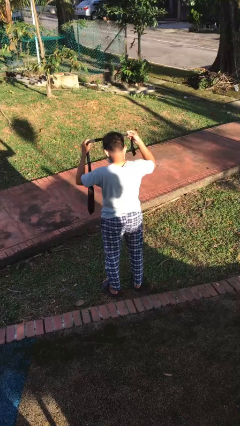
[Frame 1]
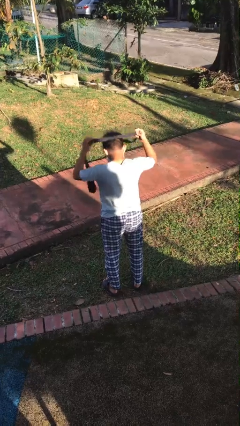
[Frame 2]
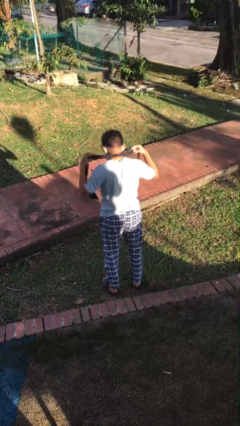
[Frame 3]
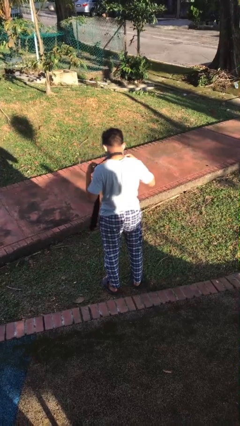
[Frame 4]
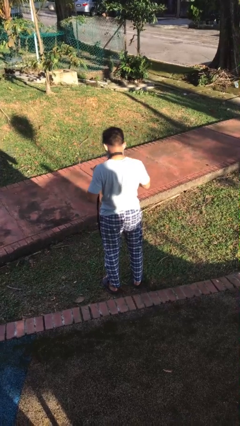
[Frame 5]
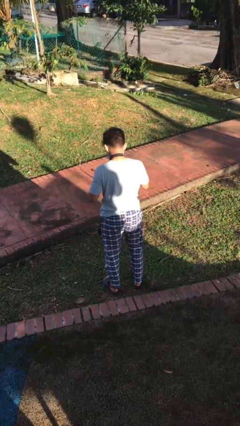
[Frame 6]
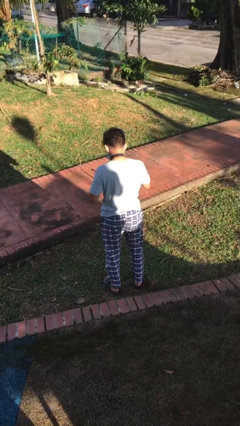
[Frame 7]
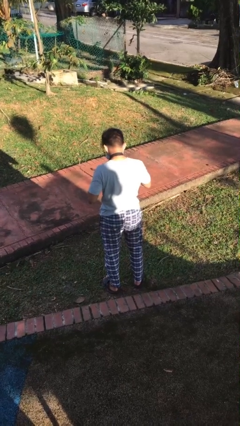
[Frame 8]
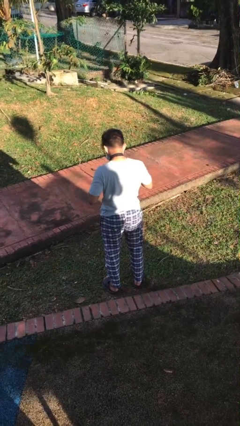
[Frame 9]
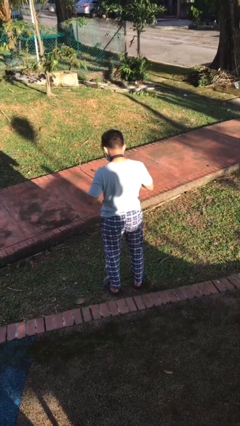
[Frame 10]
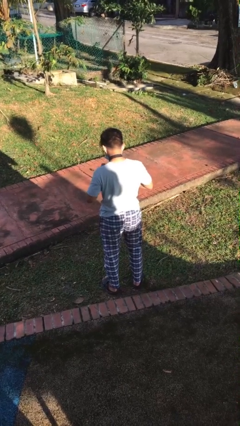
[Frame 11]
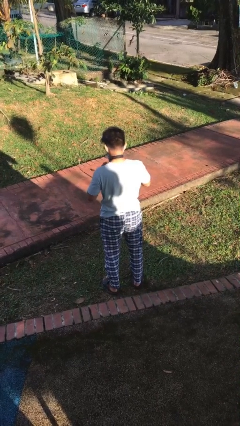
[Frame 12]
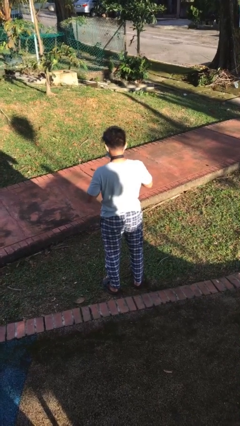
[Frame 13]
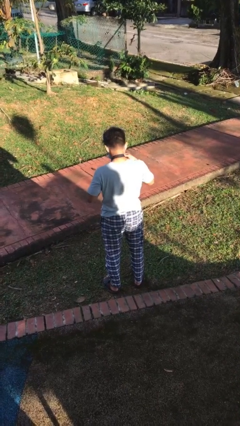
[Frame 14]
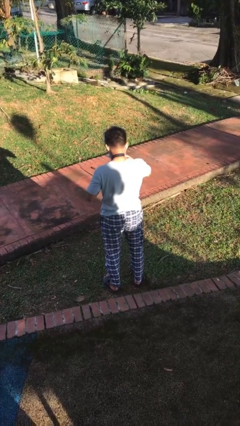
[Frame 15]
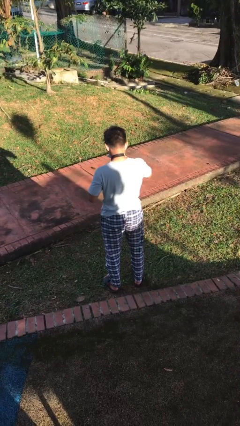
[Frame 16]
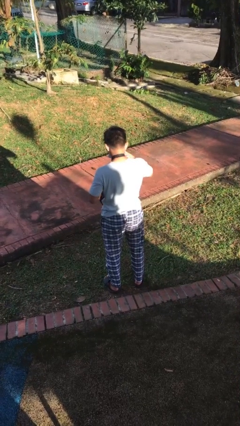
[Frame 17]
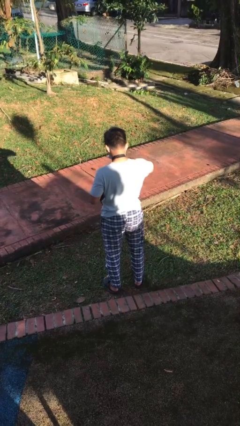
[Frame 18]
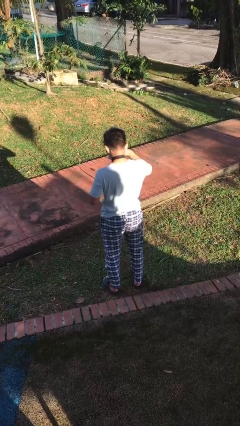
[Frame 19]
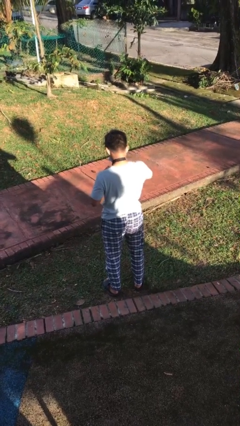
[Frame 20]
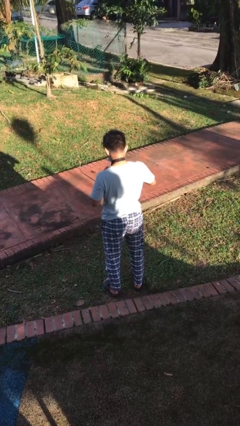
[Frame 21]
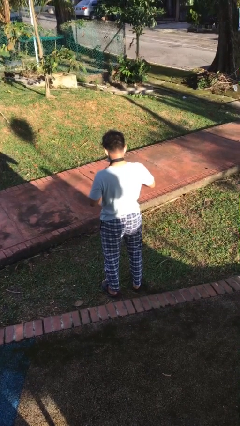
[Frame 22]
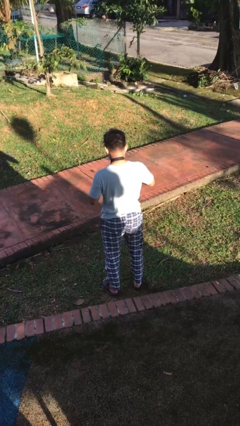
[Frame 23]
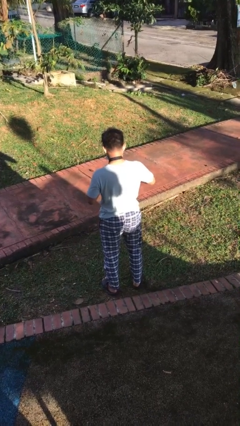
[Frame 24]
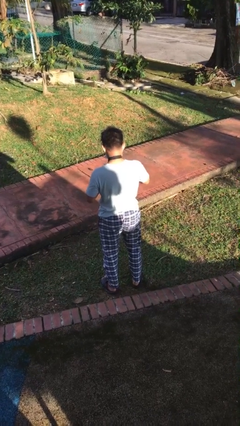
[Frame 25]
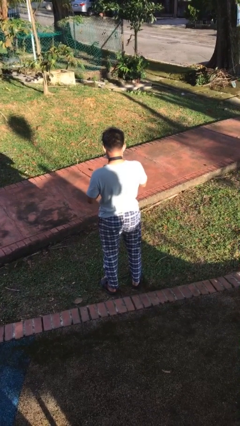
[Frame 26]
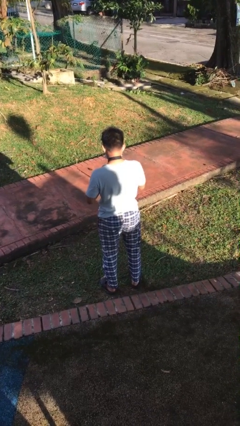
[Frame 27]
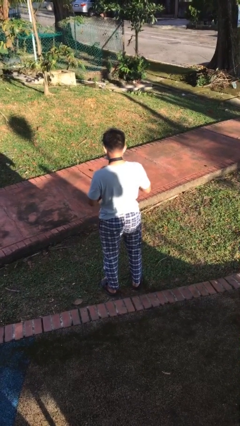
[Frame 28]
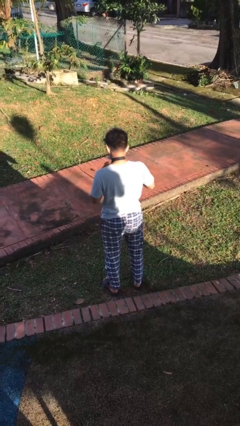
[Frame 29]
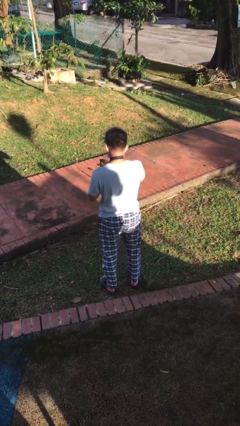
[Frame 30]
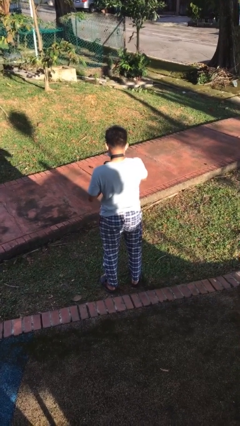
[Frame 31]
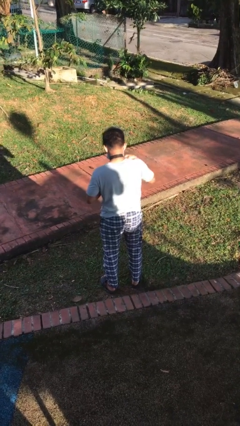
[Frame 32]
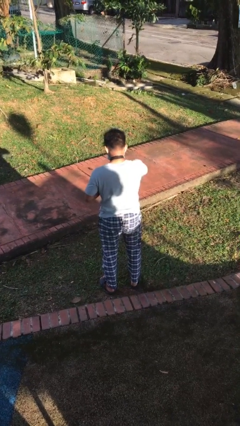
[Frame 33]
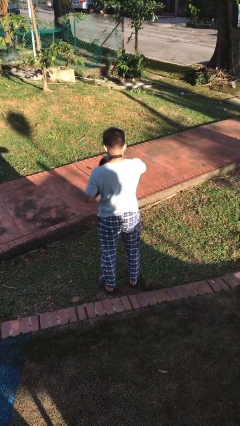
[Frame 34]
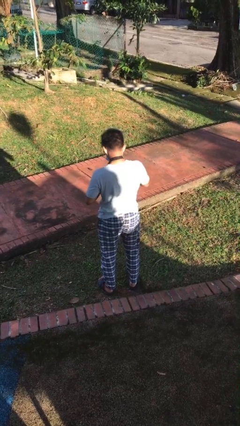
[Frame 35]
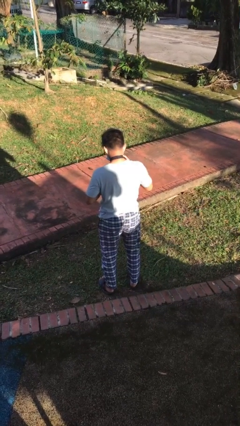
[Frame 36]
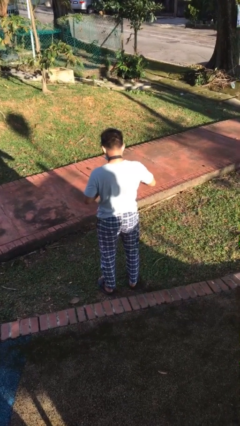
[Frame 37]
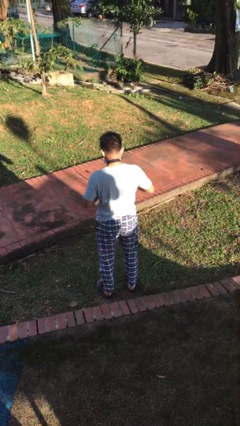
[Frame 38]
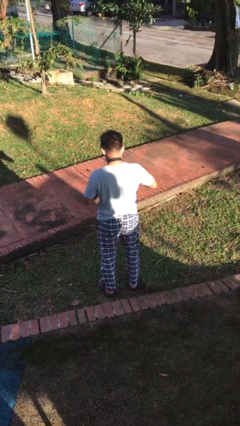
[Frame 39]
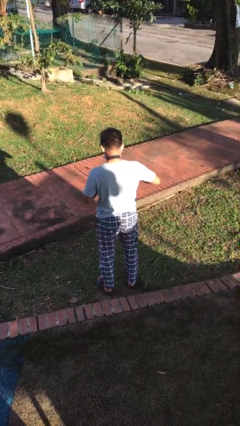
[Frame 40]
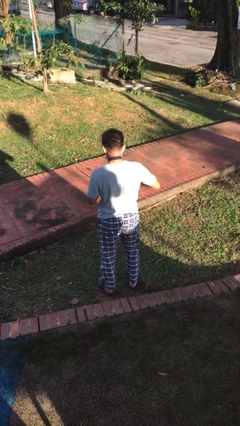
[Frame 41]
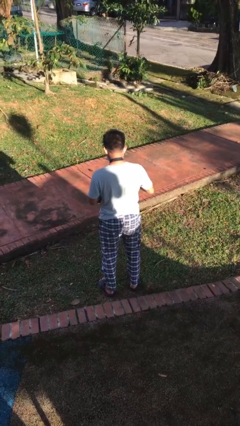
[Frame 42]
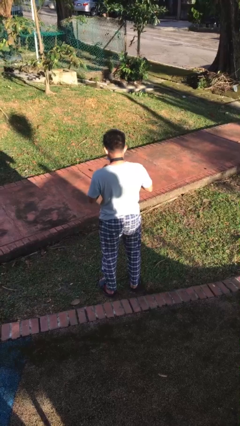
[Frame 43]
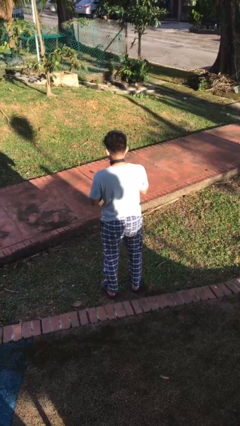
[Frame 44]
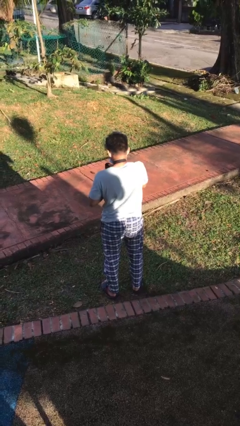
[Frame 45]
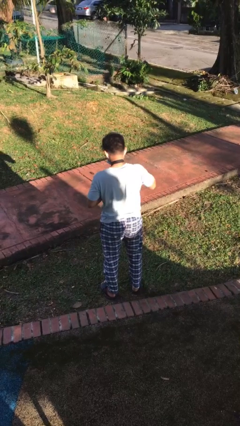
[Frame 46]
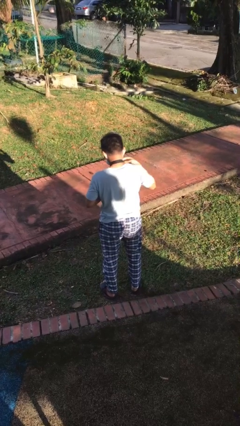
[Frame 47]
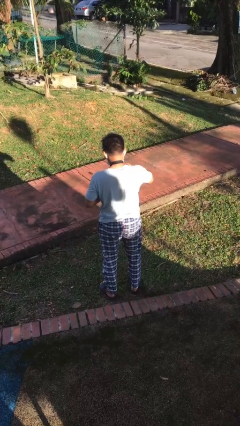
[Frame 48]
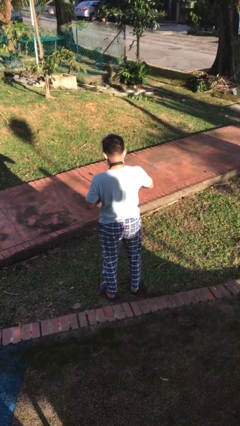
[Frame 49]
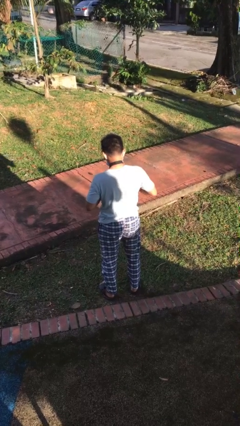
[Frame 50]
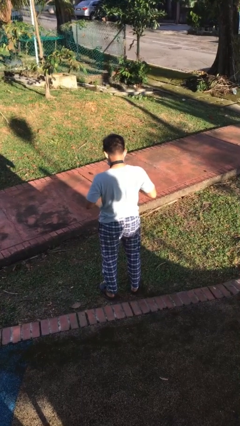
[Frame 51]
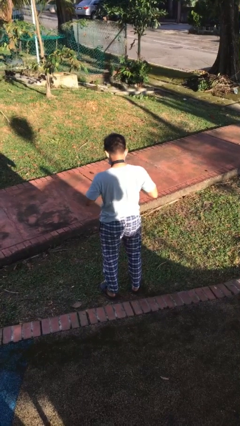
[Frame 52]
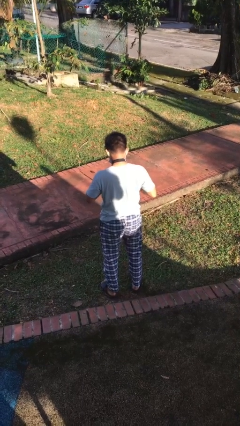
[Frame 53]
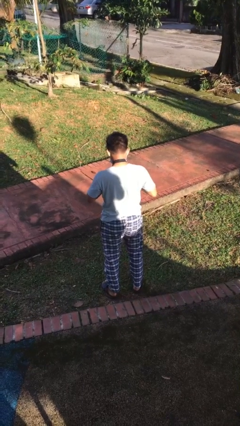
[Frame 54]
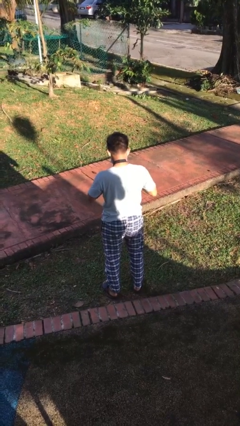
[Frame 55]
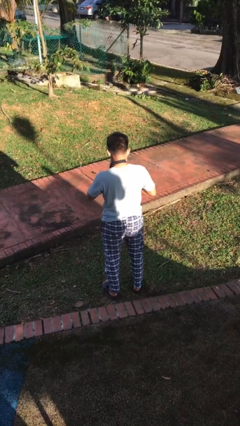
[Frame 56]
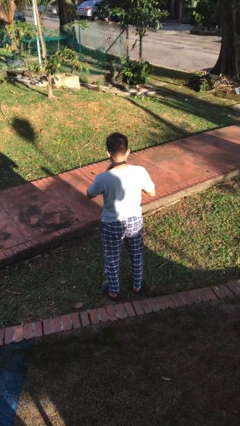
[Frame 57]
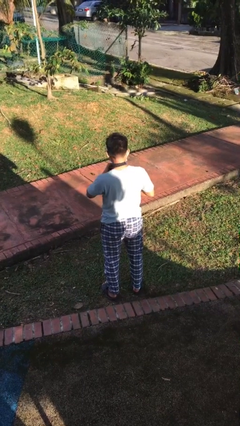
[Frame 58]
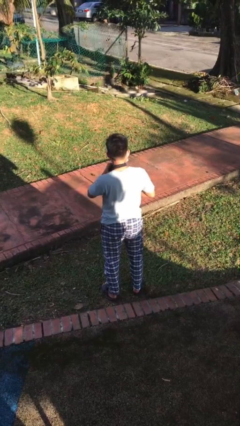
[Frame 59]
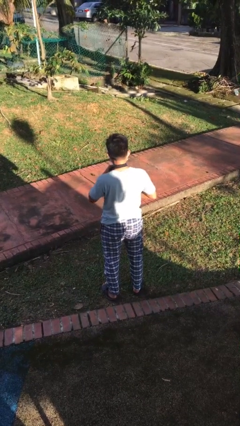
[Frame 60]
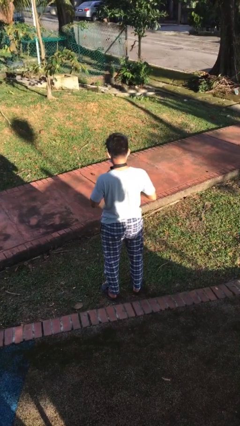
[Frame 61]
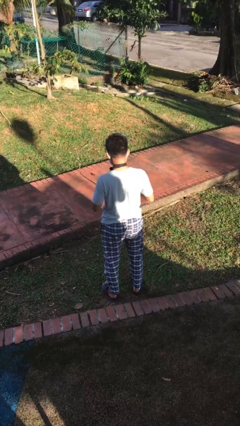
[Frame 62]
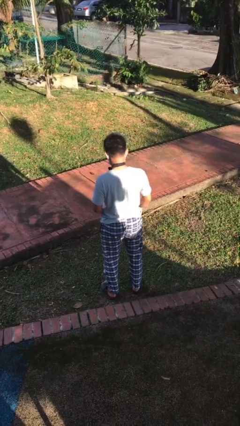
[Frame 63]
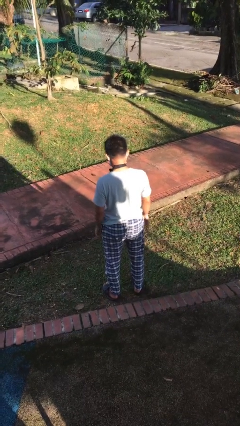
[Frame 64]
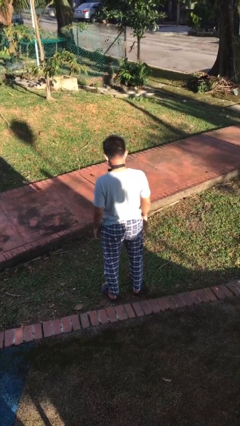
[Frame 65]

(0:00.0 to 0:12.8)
person puts on necktie

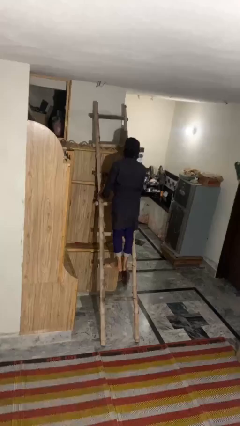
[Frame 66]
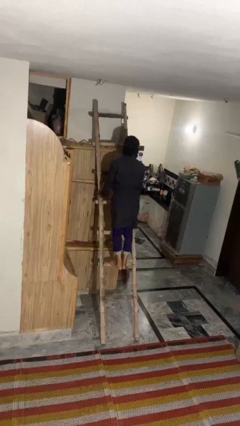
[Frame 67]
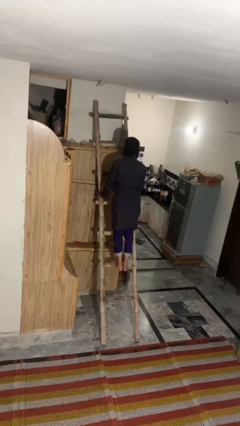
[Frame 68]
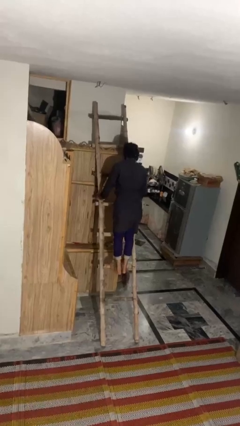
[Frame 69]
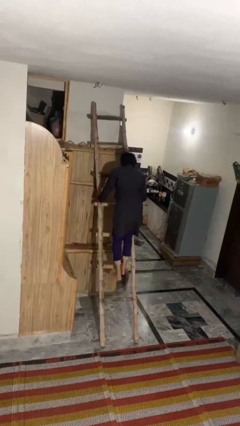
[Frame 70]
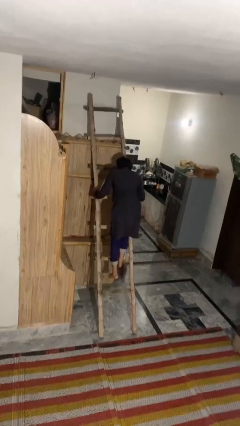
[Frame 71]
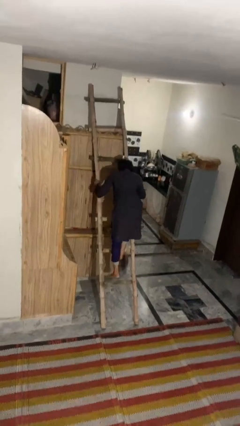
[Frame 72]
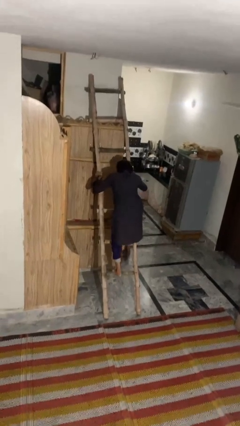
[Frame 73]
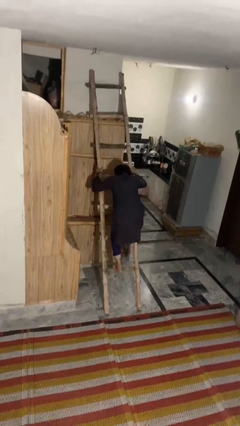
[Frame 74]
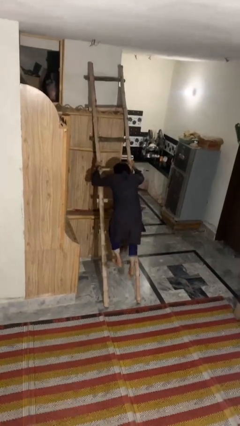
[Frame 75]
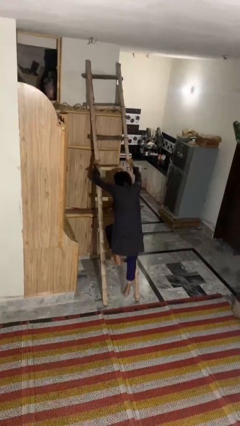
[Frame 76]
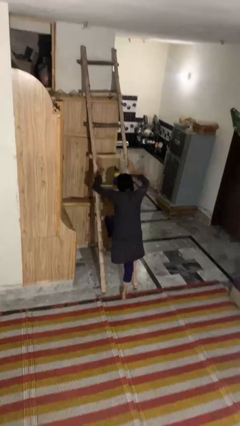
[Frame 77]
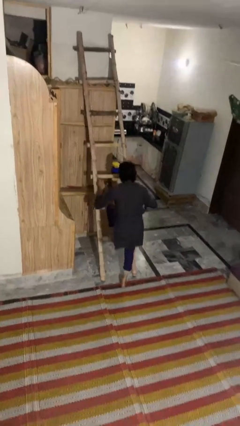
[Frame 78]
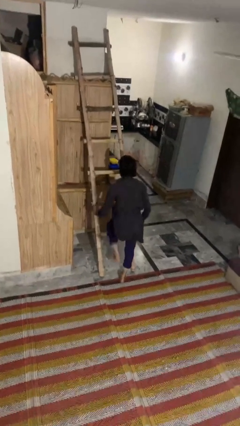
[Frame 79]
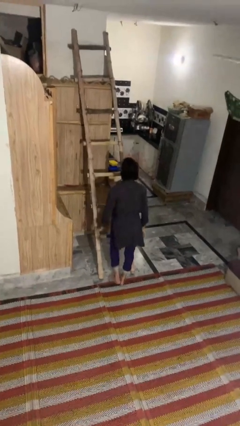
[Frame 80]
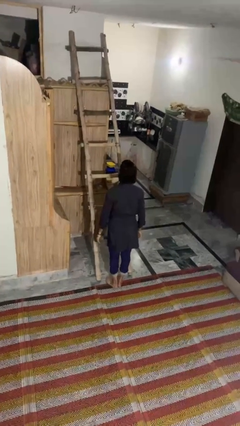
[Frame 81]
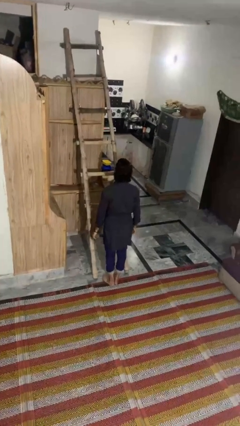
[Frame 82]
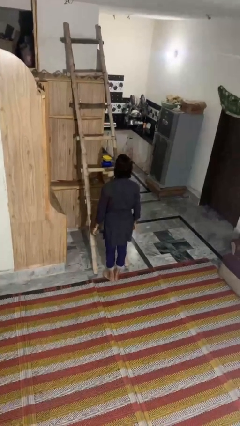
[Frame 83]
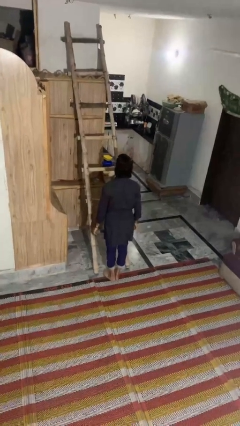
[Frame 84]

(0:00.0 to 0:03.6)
person climbs down ladder

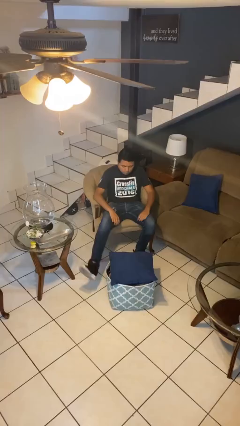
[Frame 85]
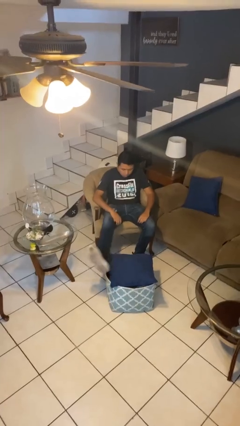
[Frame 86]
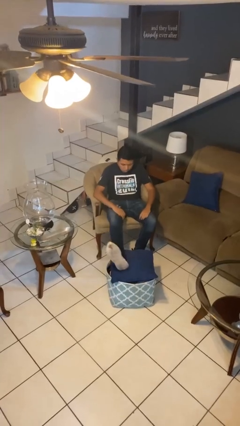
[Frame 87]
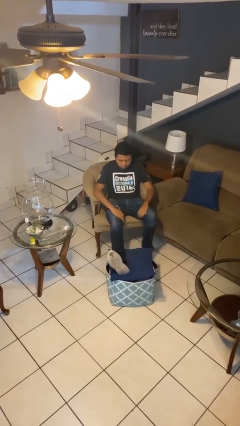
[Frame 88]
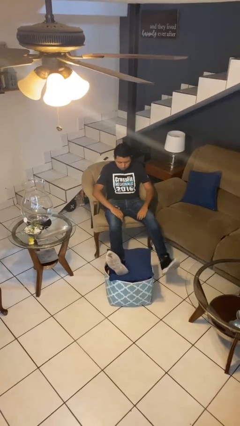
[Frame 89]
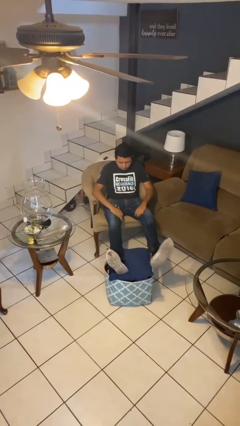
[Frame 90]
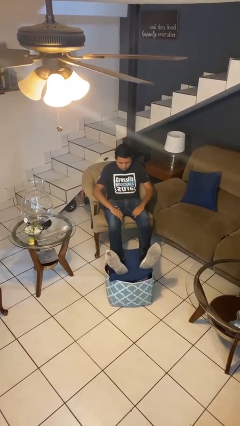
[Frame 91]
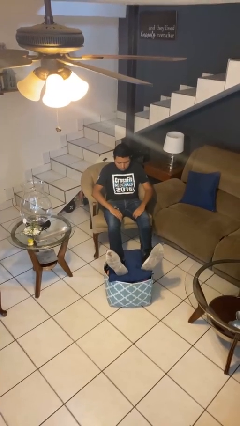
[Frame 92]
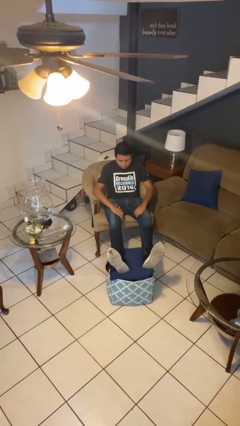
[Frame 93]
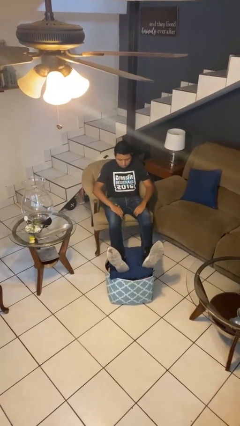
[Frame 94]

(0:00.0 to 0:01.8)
person puts feet up
